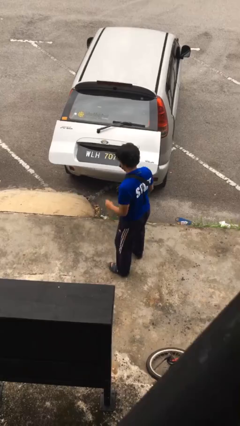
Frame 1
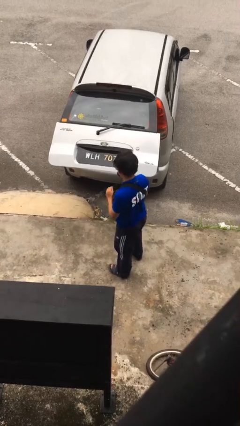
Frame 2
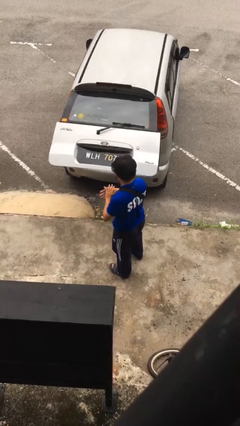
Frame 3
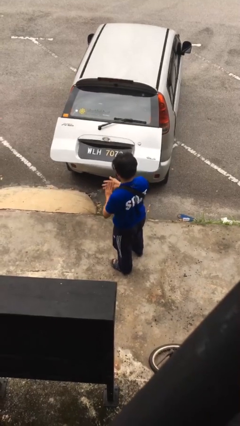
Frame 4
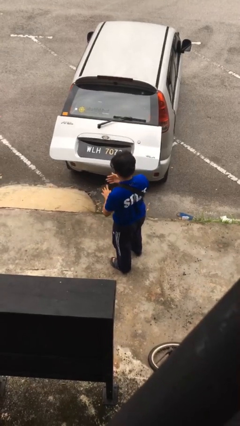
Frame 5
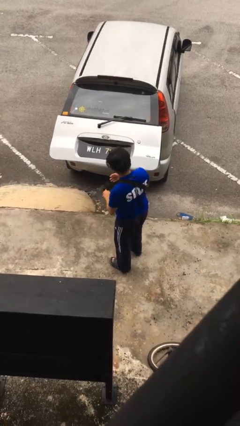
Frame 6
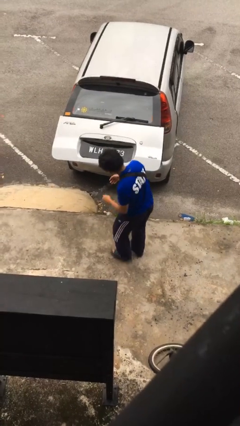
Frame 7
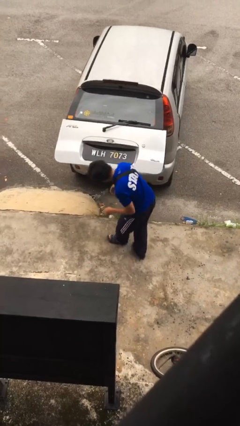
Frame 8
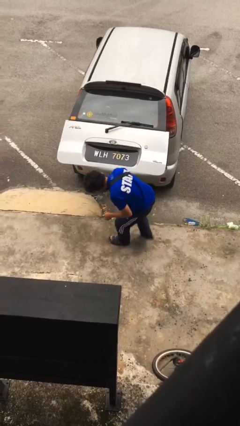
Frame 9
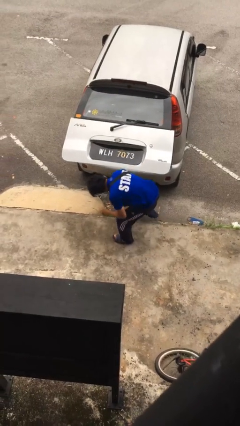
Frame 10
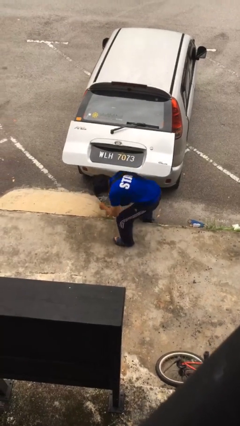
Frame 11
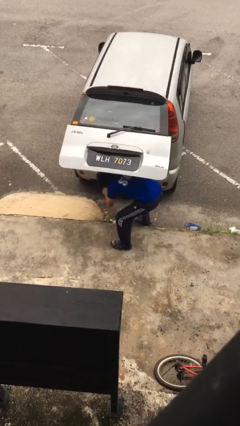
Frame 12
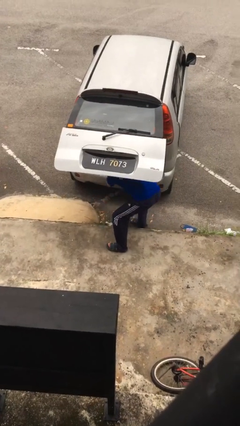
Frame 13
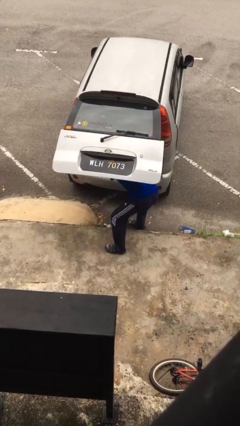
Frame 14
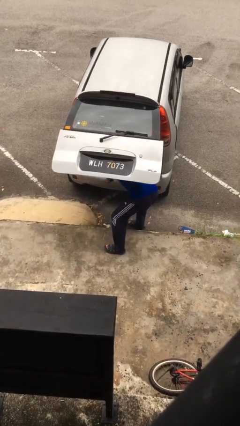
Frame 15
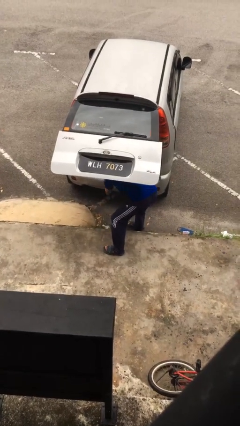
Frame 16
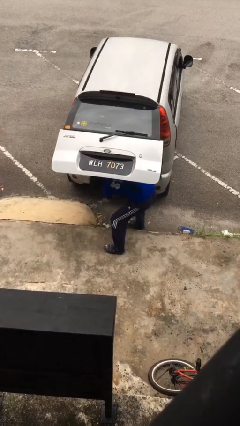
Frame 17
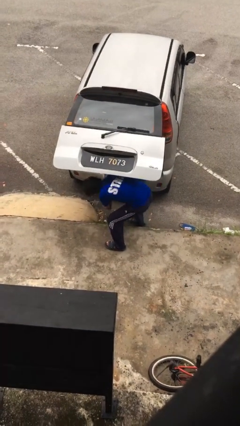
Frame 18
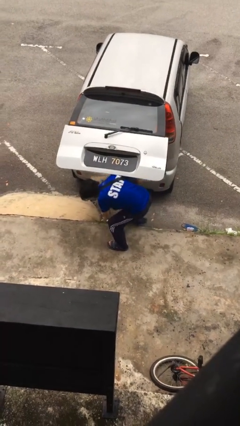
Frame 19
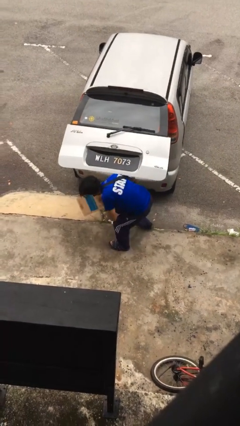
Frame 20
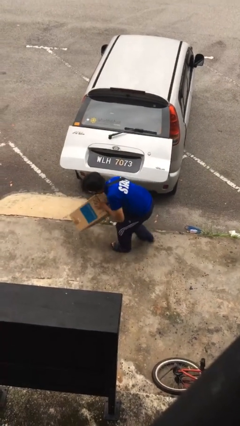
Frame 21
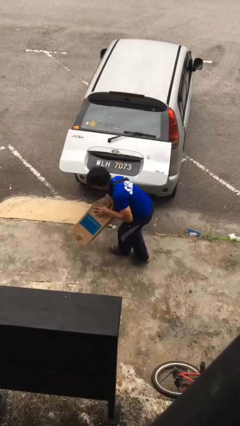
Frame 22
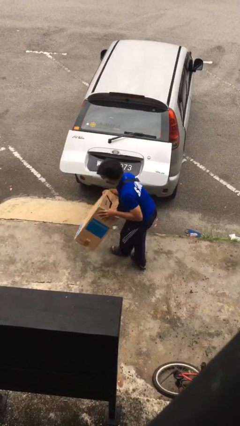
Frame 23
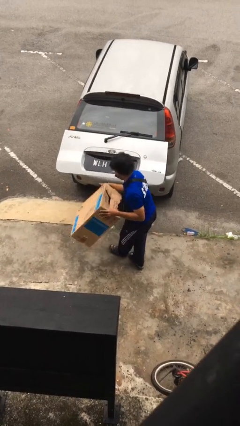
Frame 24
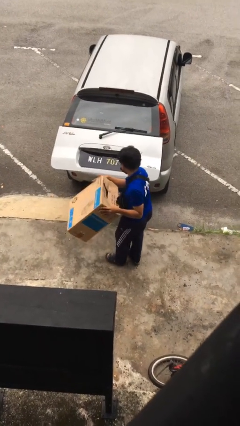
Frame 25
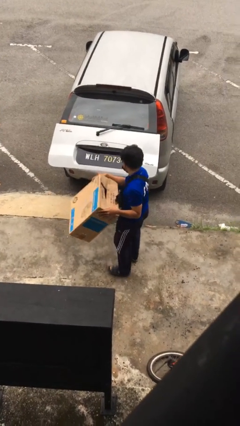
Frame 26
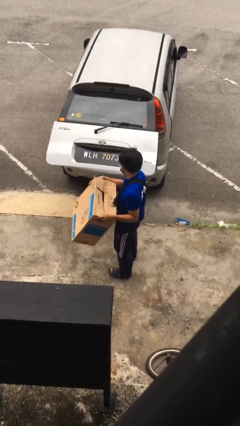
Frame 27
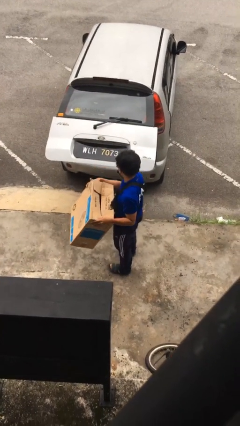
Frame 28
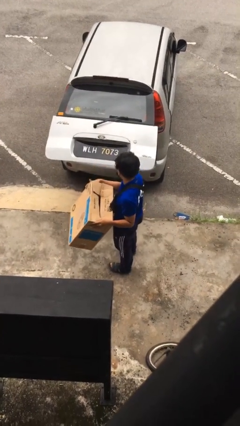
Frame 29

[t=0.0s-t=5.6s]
person unloads car

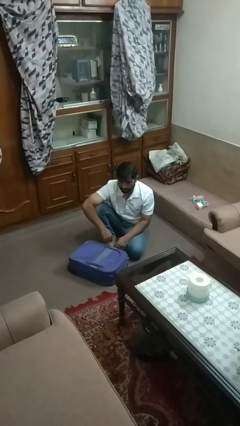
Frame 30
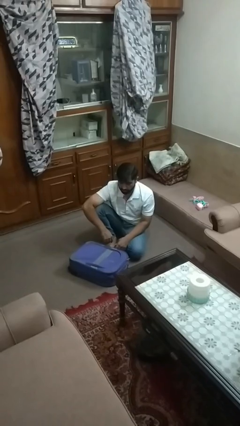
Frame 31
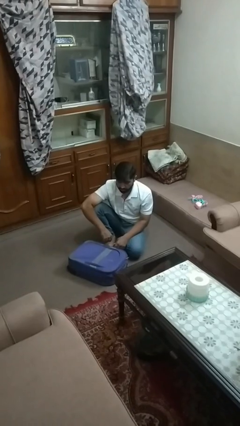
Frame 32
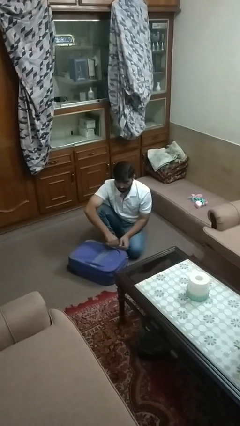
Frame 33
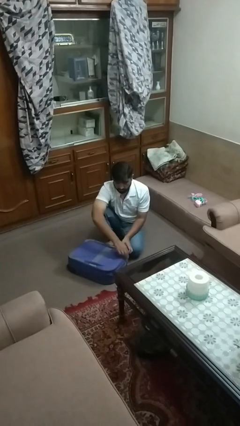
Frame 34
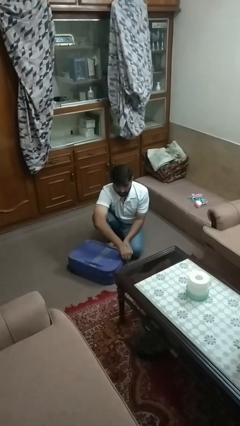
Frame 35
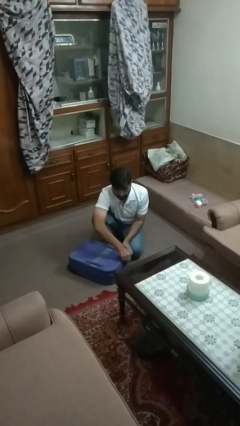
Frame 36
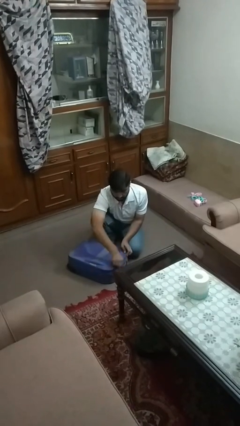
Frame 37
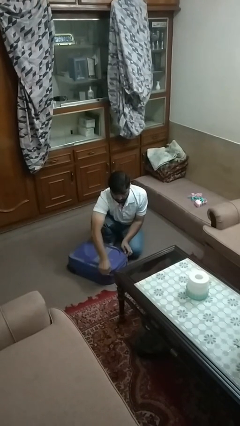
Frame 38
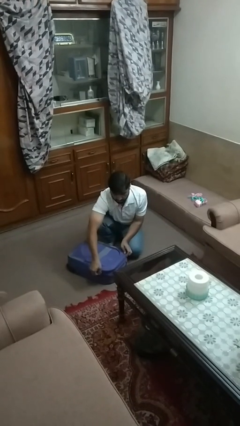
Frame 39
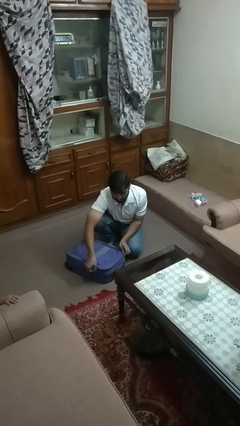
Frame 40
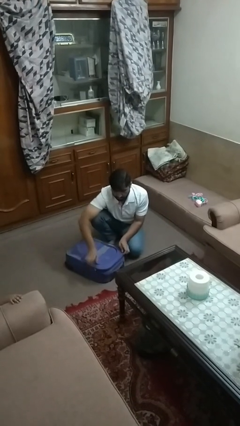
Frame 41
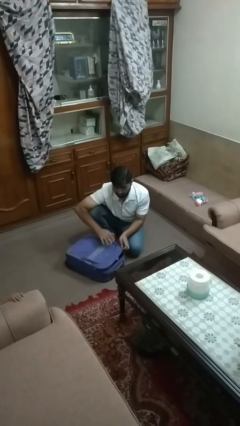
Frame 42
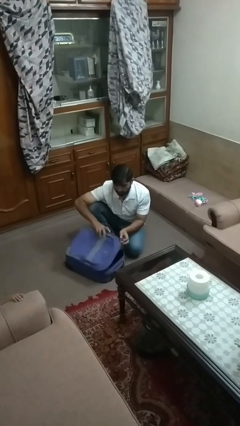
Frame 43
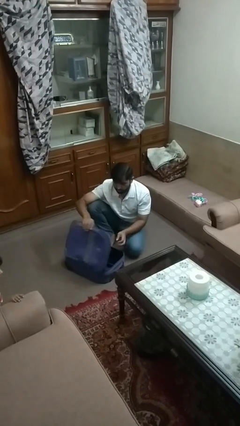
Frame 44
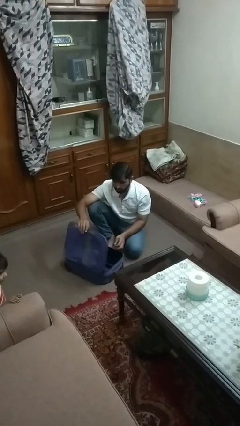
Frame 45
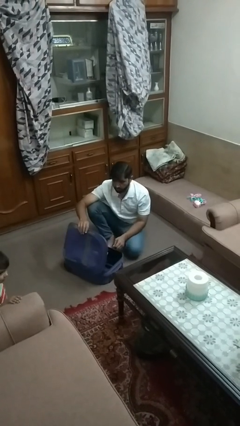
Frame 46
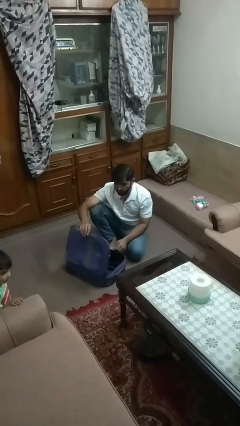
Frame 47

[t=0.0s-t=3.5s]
person opens suitcase

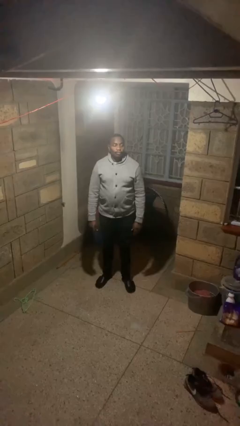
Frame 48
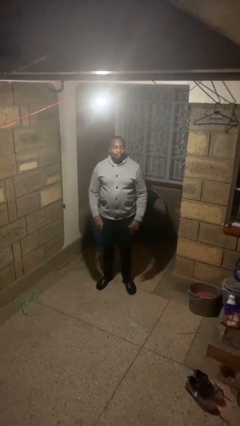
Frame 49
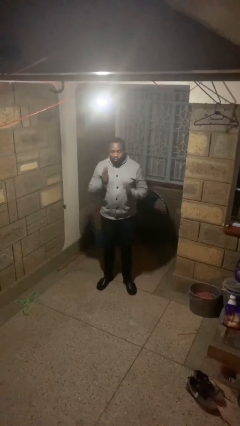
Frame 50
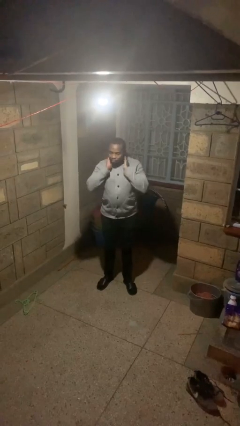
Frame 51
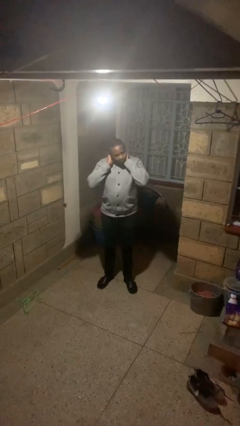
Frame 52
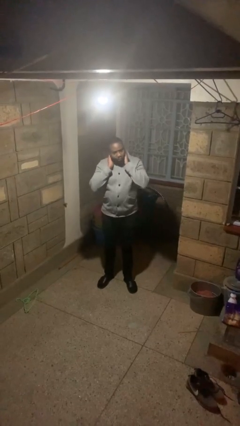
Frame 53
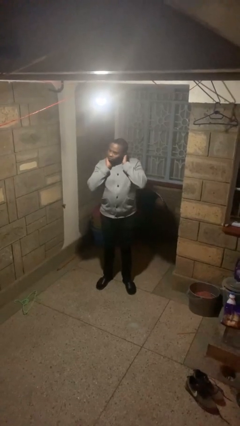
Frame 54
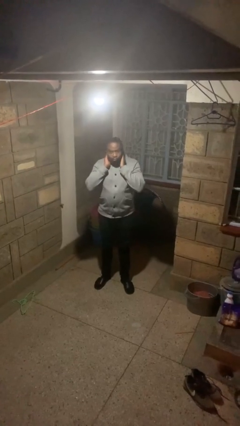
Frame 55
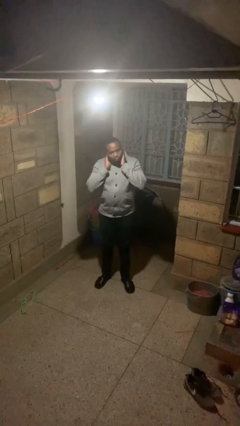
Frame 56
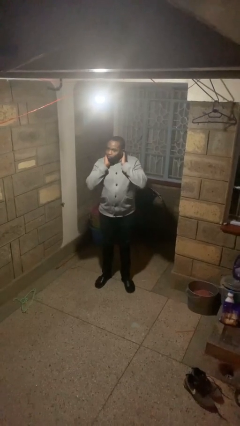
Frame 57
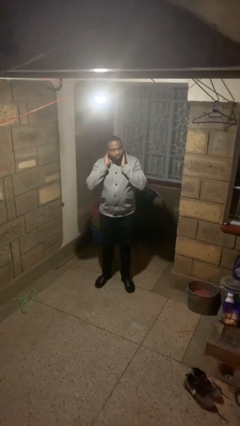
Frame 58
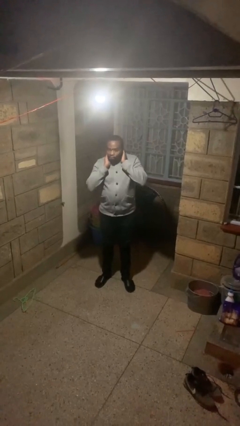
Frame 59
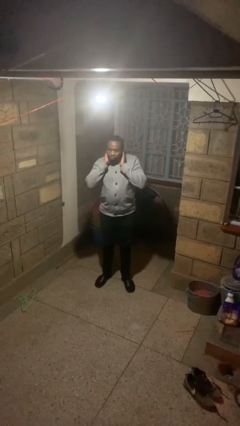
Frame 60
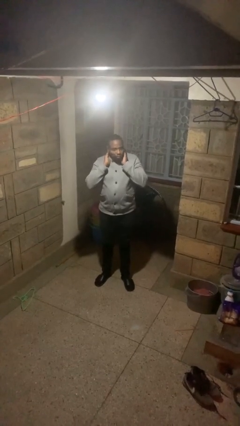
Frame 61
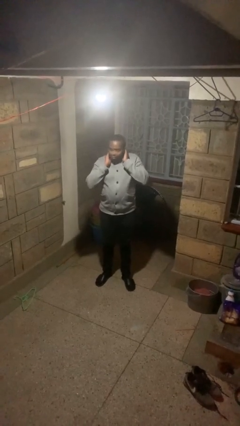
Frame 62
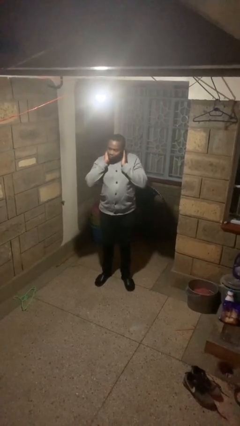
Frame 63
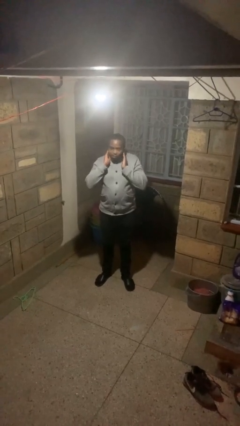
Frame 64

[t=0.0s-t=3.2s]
person rubs neck

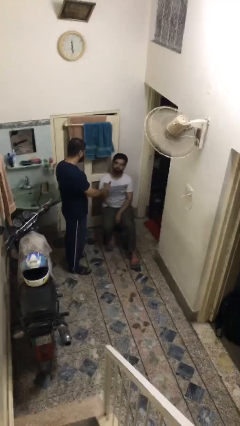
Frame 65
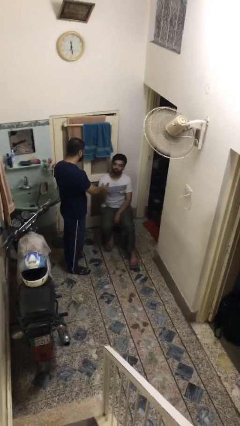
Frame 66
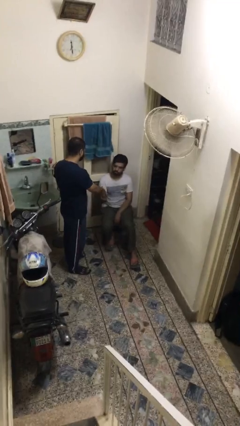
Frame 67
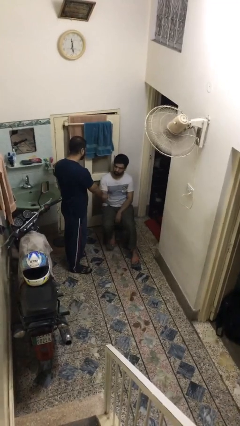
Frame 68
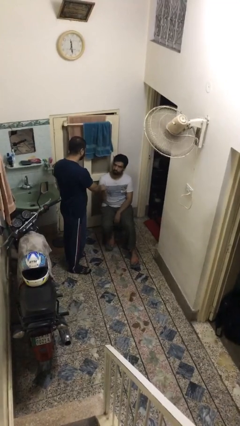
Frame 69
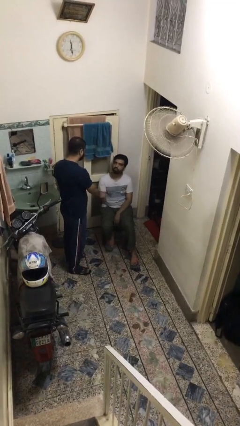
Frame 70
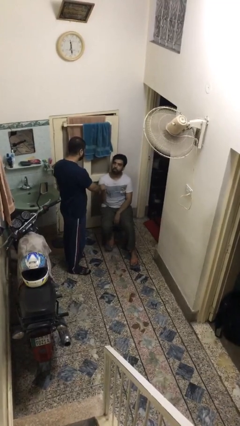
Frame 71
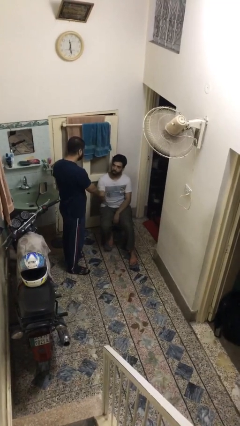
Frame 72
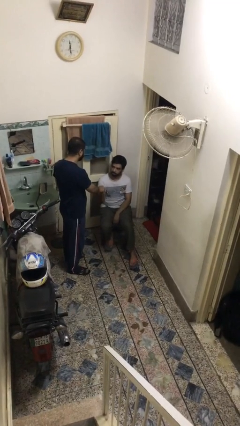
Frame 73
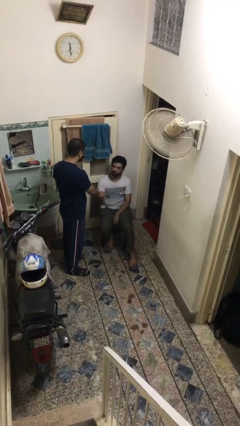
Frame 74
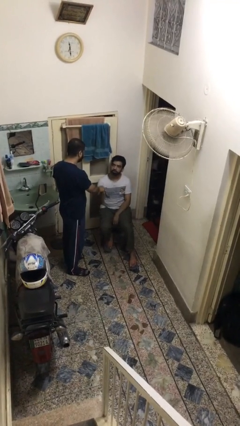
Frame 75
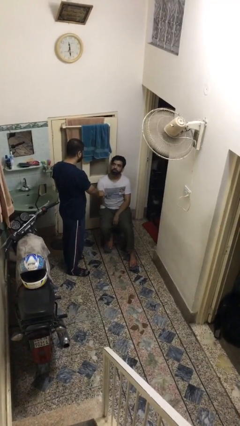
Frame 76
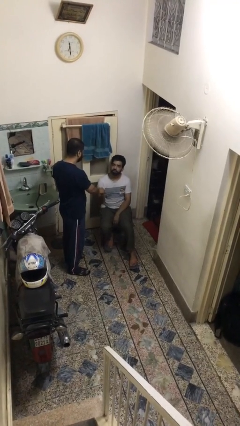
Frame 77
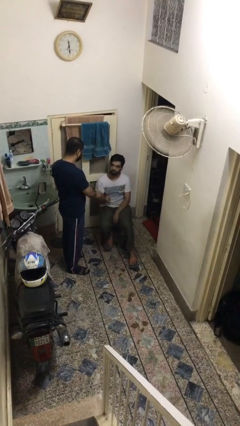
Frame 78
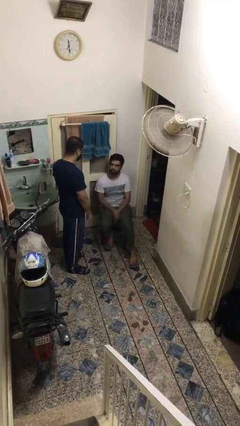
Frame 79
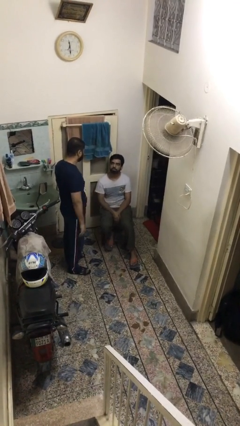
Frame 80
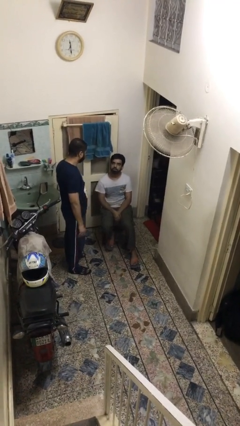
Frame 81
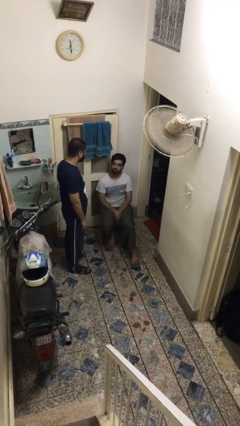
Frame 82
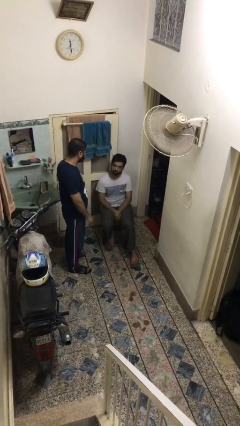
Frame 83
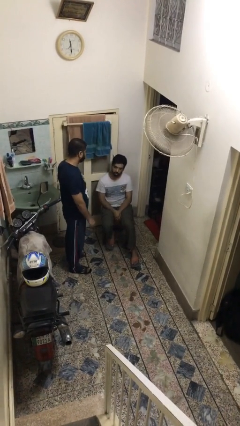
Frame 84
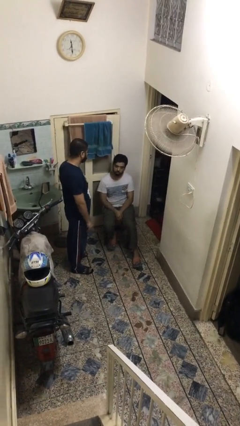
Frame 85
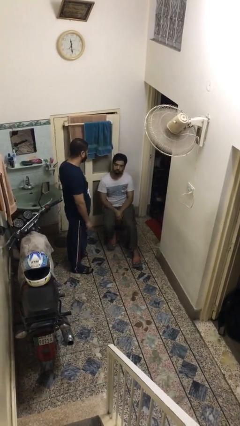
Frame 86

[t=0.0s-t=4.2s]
person shakes hand

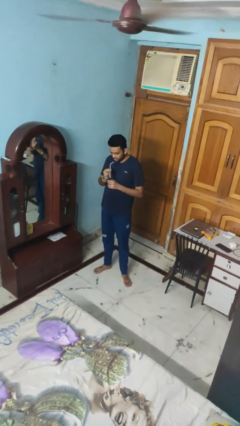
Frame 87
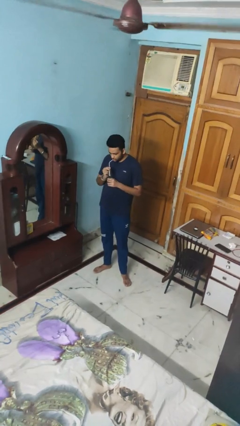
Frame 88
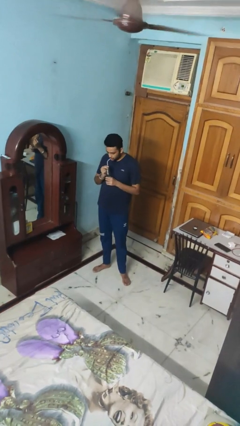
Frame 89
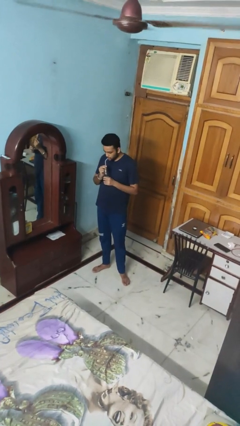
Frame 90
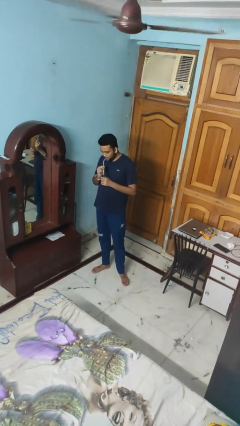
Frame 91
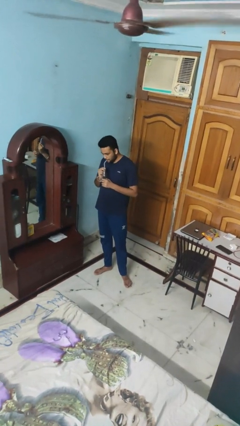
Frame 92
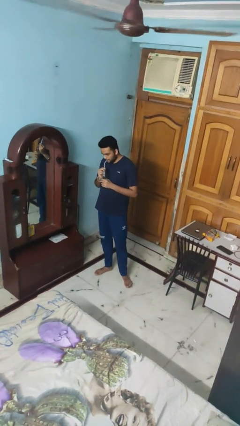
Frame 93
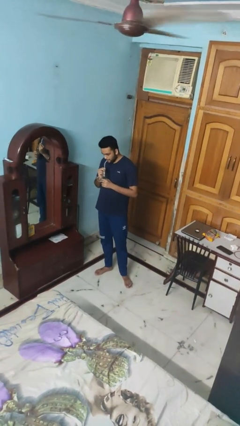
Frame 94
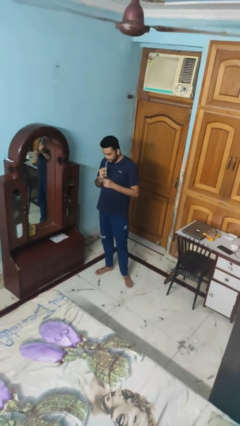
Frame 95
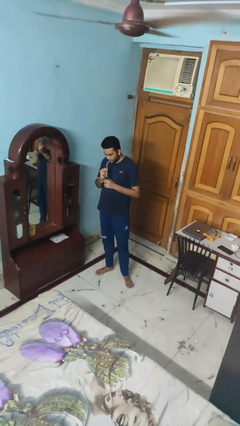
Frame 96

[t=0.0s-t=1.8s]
person drinks from straw
